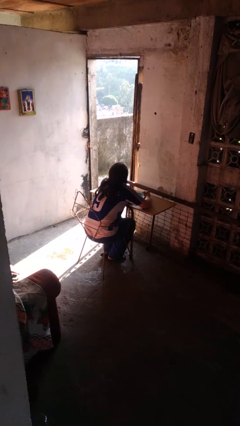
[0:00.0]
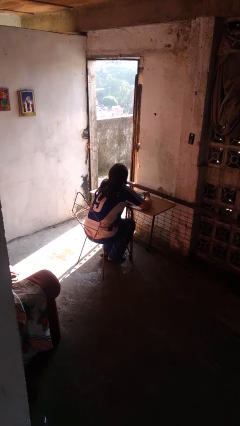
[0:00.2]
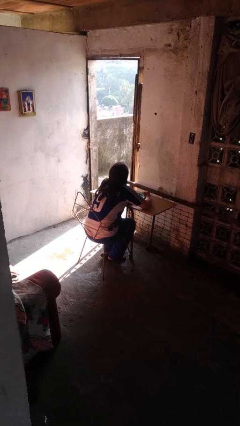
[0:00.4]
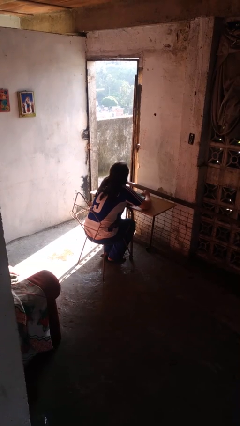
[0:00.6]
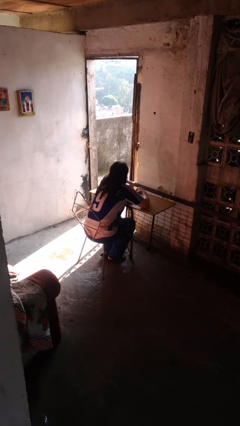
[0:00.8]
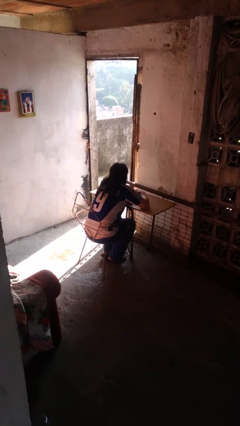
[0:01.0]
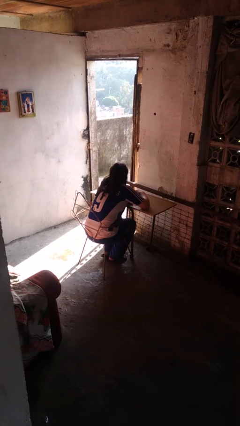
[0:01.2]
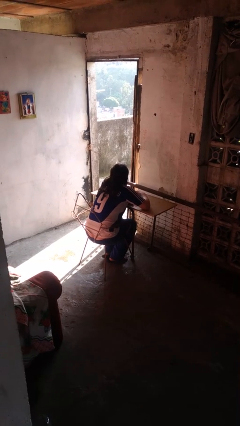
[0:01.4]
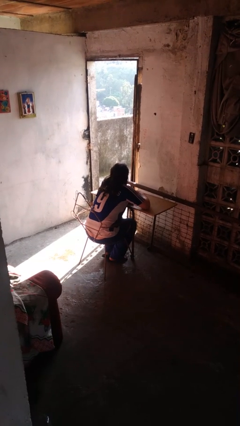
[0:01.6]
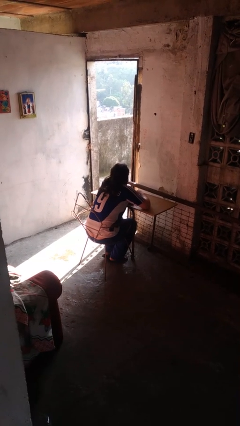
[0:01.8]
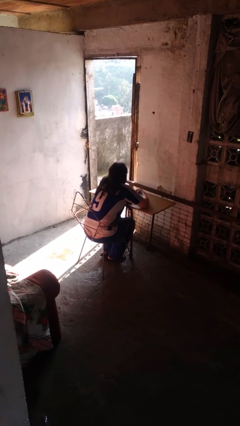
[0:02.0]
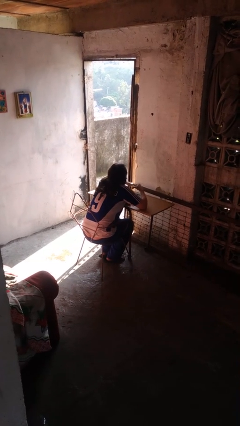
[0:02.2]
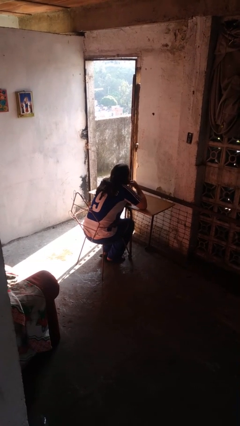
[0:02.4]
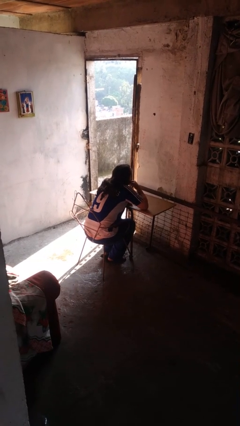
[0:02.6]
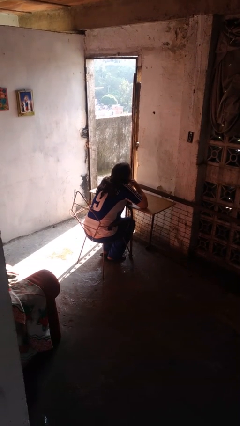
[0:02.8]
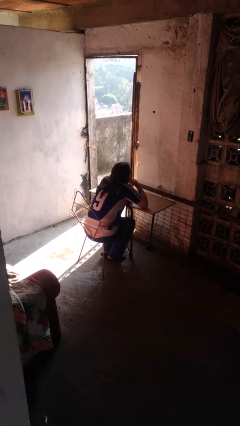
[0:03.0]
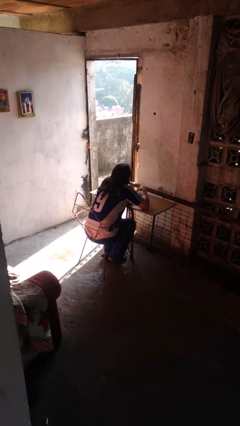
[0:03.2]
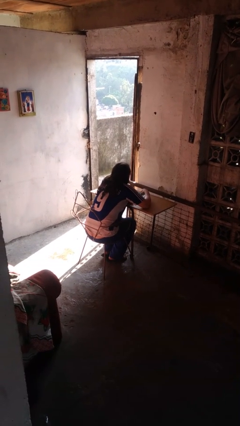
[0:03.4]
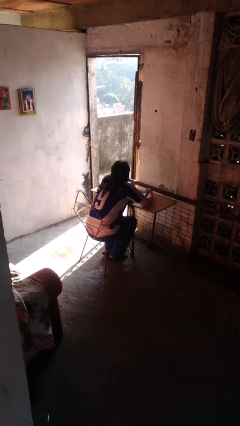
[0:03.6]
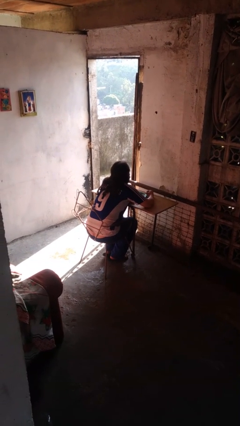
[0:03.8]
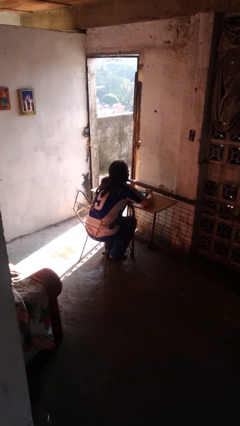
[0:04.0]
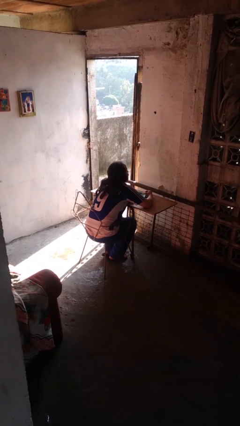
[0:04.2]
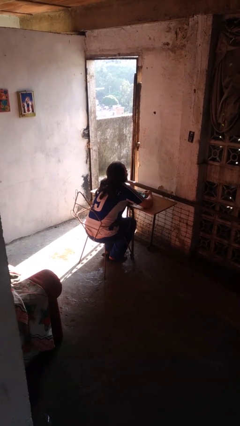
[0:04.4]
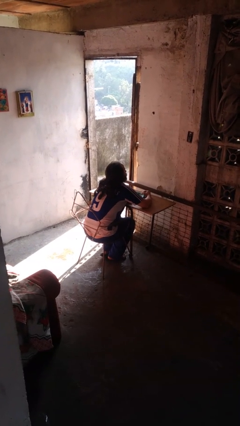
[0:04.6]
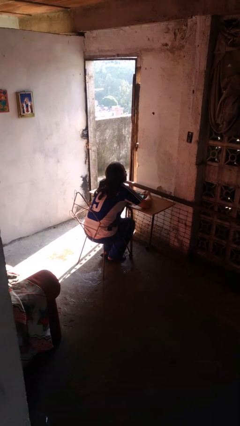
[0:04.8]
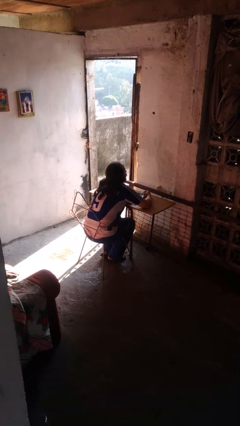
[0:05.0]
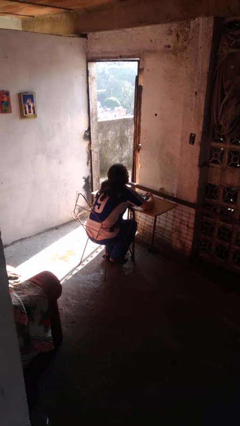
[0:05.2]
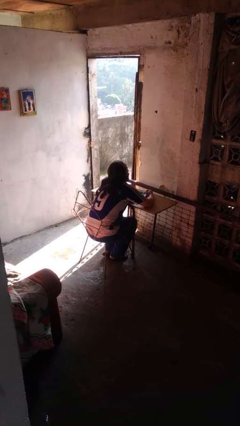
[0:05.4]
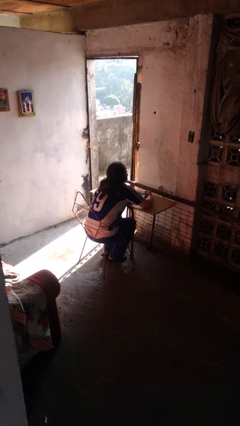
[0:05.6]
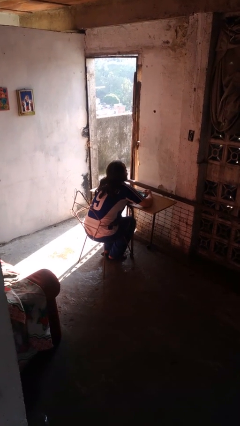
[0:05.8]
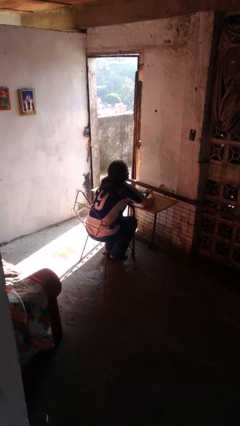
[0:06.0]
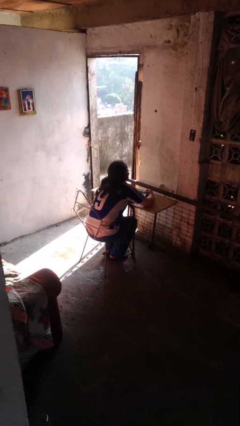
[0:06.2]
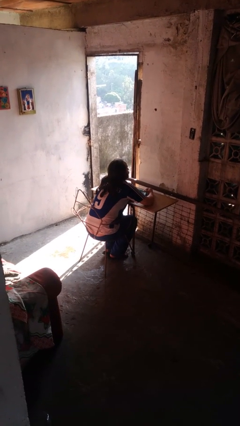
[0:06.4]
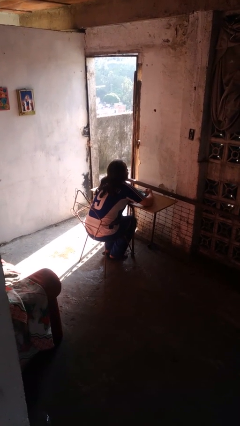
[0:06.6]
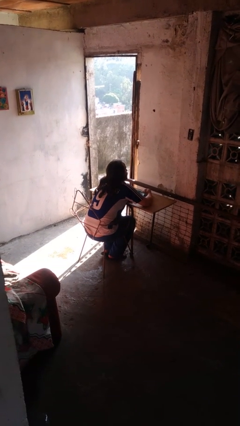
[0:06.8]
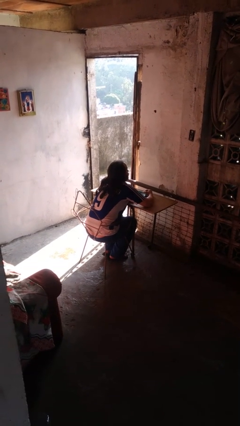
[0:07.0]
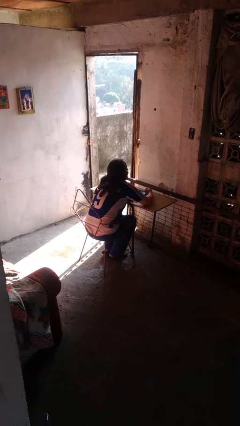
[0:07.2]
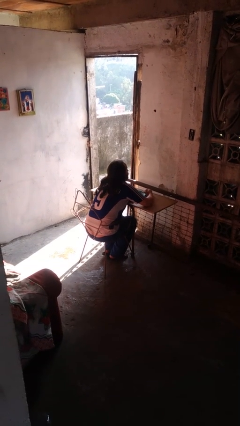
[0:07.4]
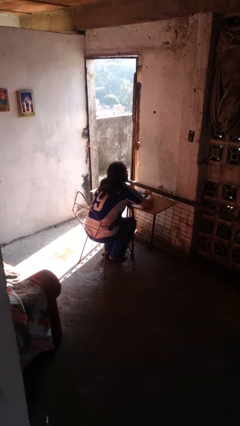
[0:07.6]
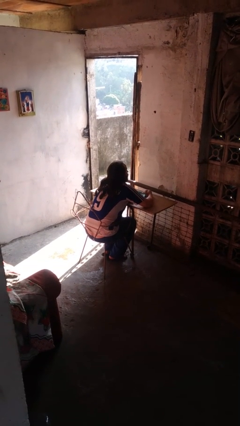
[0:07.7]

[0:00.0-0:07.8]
person eats with hands

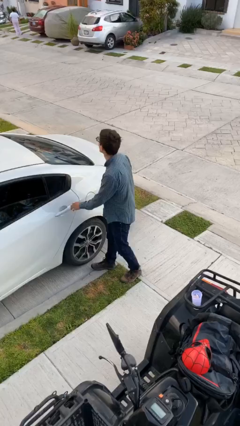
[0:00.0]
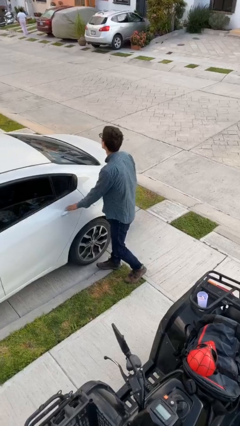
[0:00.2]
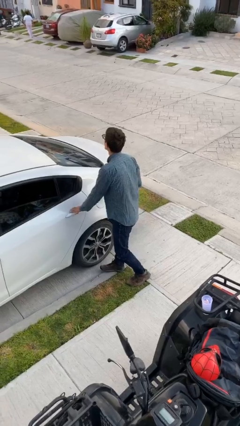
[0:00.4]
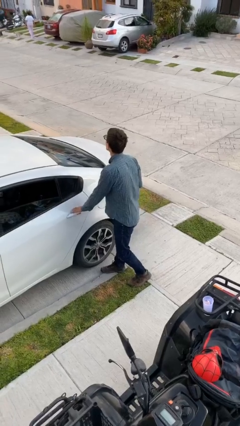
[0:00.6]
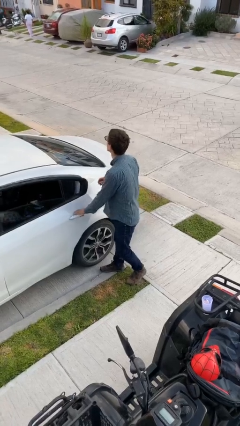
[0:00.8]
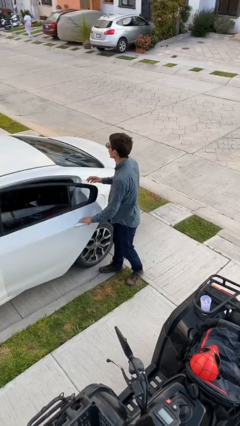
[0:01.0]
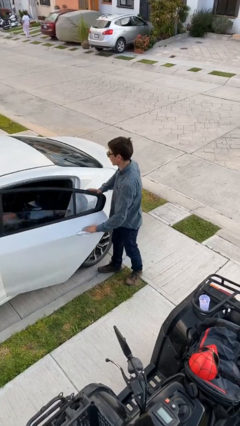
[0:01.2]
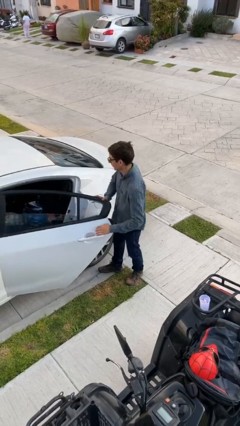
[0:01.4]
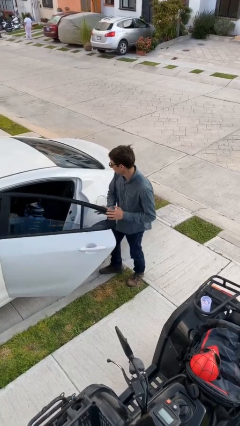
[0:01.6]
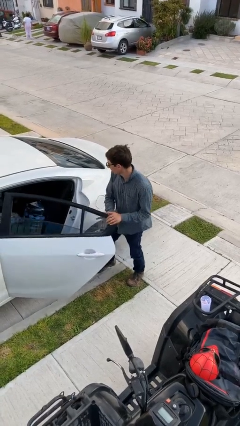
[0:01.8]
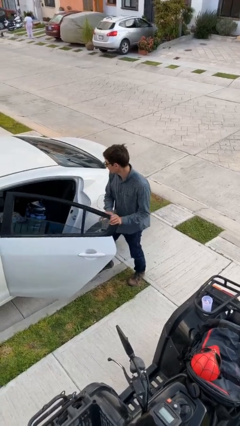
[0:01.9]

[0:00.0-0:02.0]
person opens car door

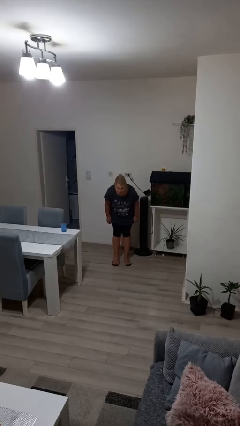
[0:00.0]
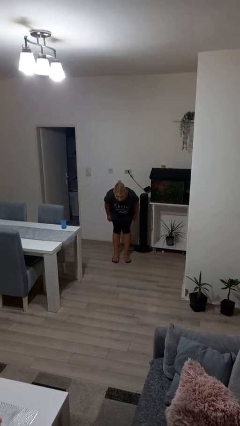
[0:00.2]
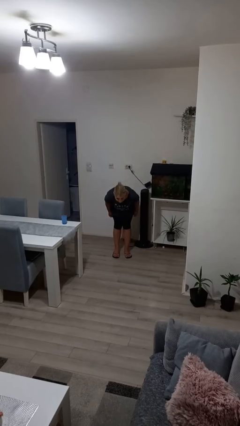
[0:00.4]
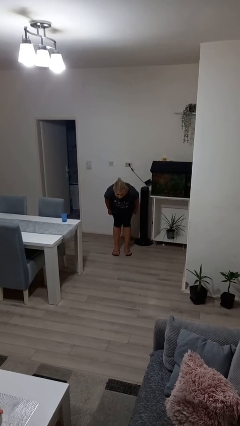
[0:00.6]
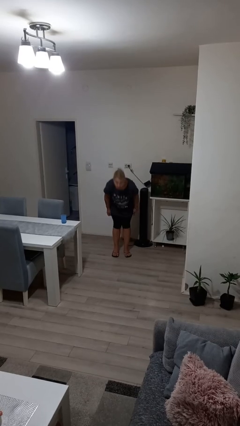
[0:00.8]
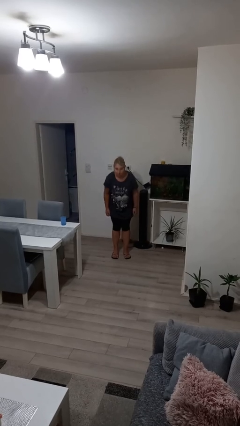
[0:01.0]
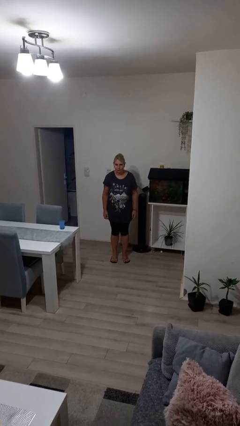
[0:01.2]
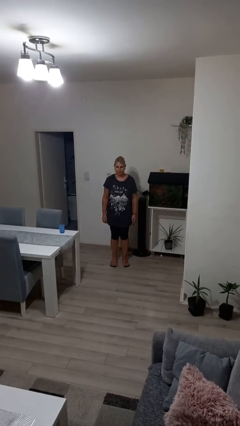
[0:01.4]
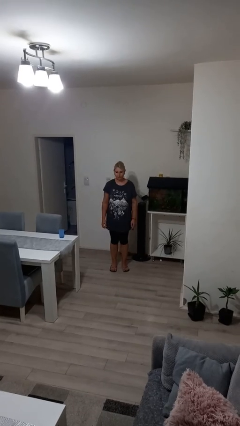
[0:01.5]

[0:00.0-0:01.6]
person bows

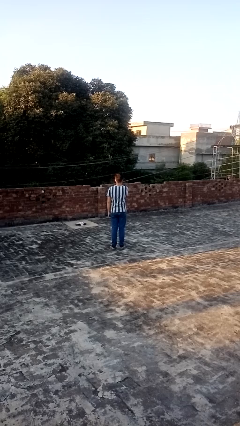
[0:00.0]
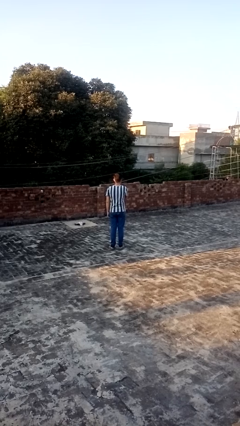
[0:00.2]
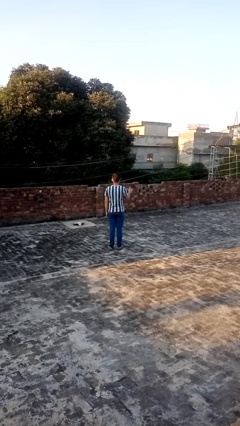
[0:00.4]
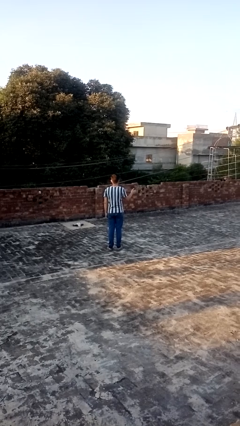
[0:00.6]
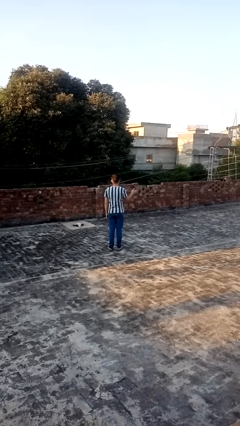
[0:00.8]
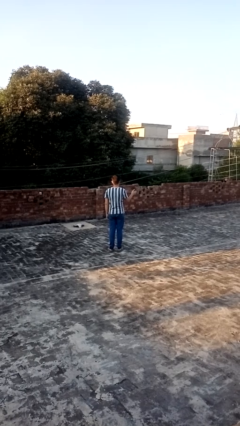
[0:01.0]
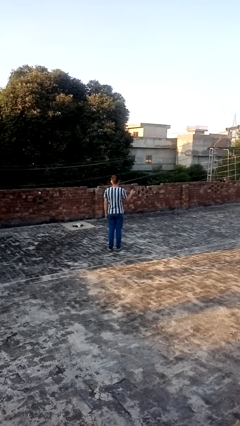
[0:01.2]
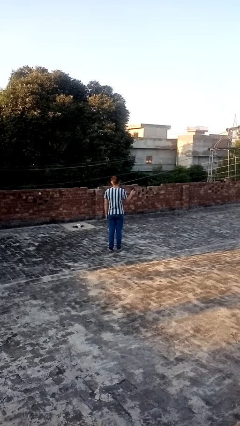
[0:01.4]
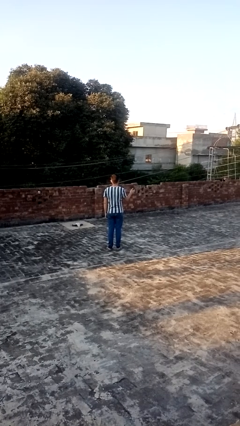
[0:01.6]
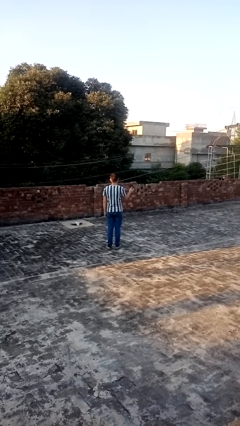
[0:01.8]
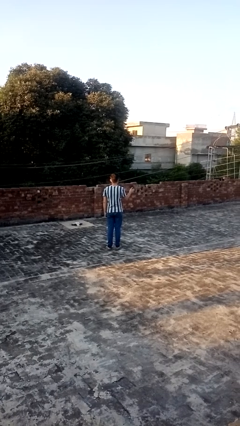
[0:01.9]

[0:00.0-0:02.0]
person gestures swipe right

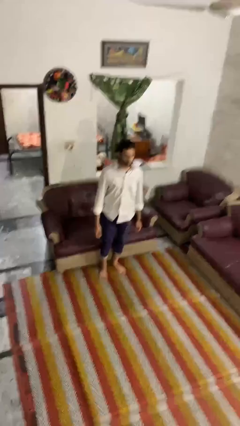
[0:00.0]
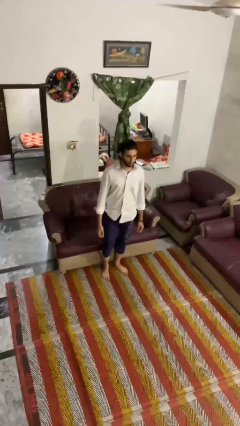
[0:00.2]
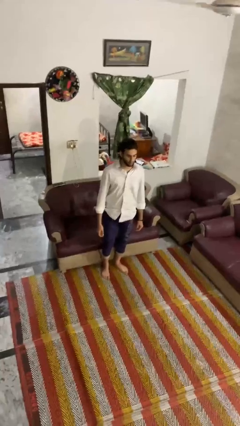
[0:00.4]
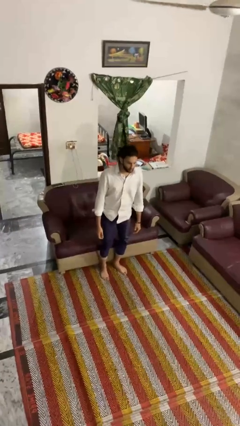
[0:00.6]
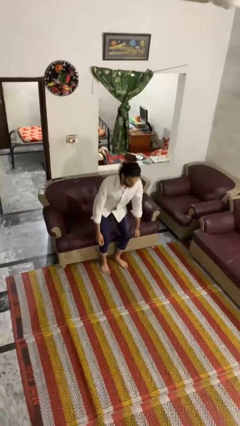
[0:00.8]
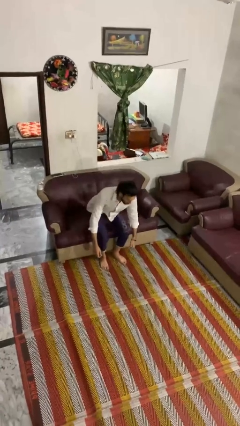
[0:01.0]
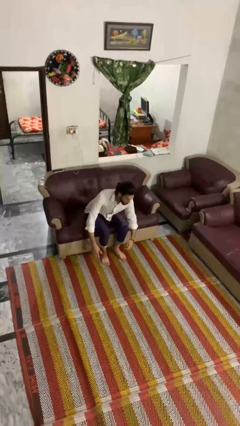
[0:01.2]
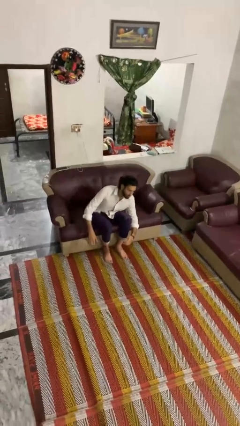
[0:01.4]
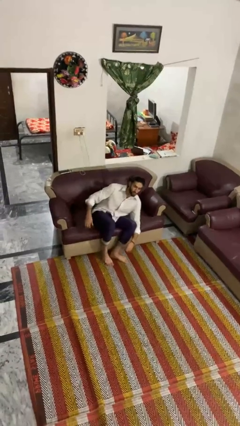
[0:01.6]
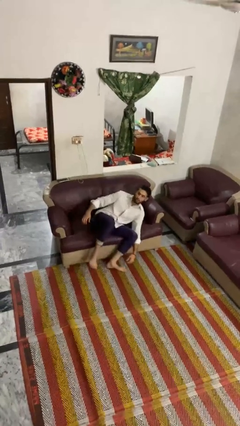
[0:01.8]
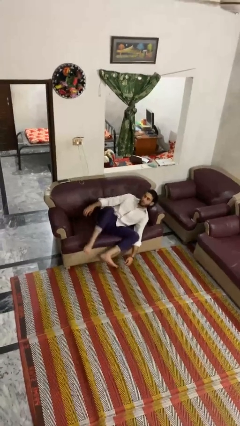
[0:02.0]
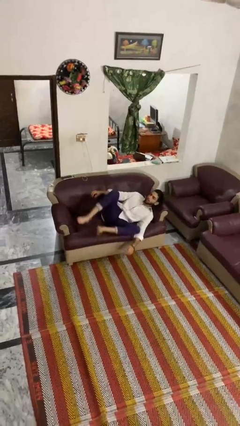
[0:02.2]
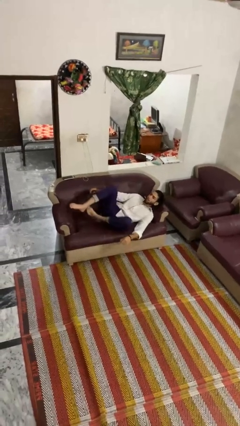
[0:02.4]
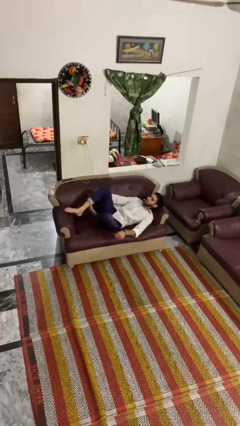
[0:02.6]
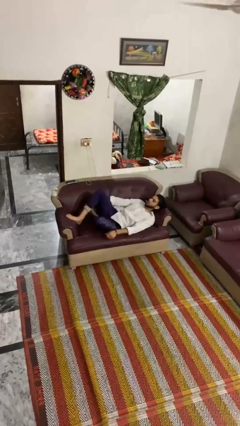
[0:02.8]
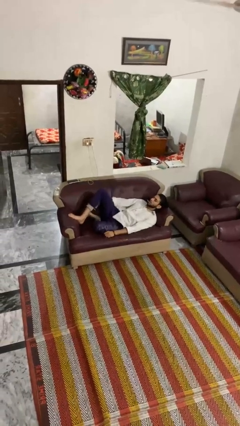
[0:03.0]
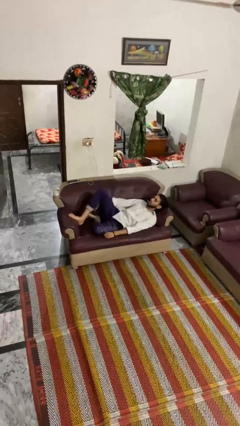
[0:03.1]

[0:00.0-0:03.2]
person lies down on couch

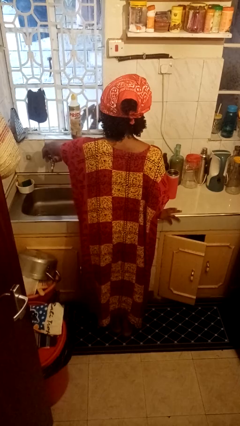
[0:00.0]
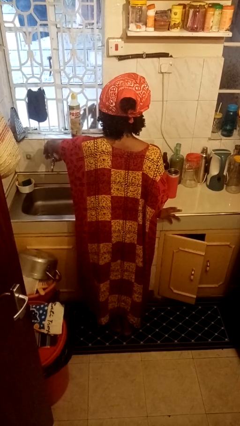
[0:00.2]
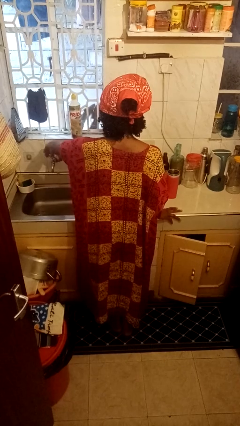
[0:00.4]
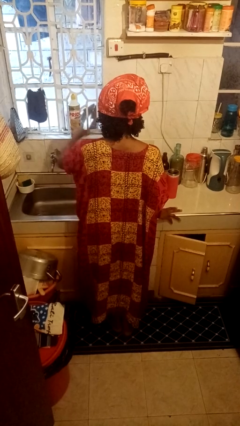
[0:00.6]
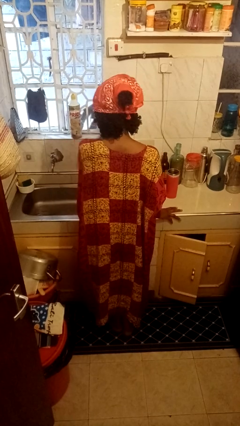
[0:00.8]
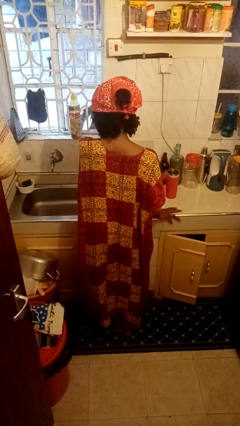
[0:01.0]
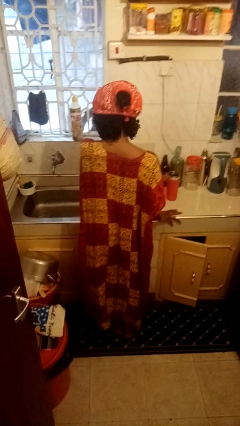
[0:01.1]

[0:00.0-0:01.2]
person turns off faucet
